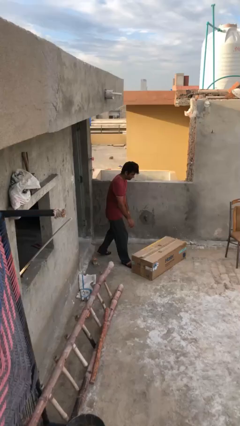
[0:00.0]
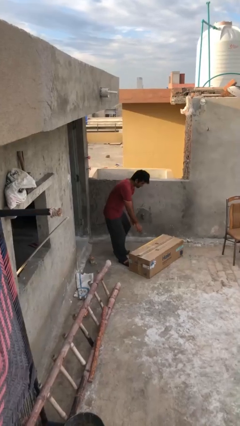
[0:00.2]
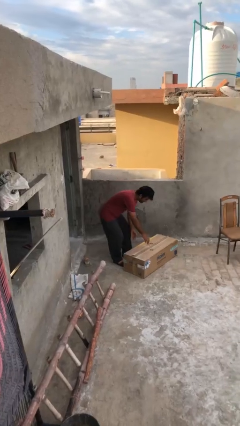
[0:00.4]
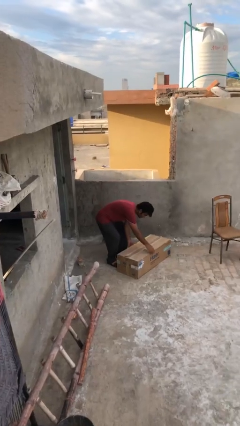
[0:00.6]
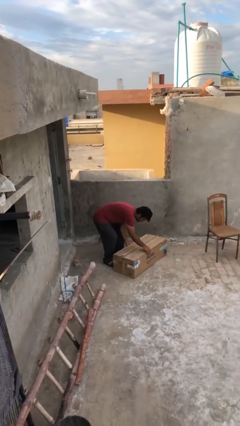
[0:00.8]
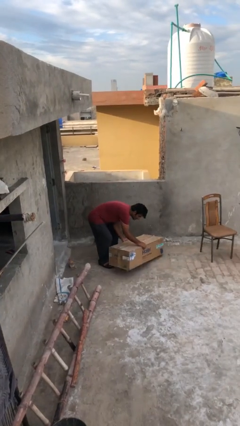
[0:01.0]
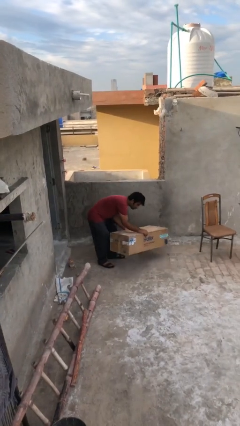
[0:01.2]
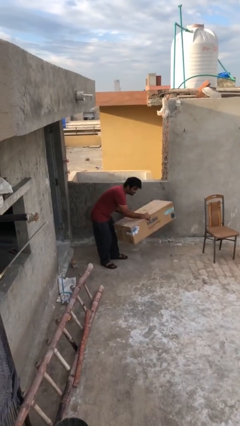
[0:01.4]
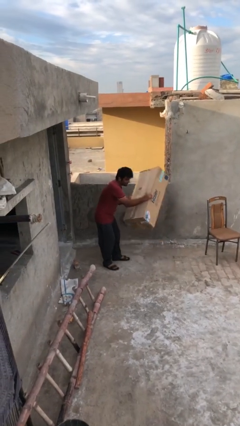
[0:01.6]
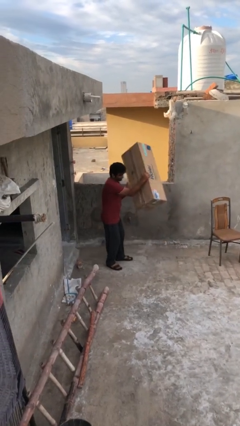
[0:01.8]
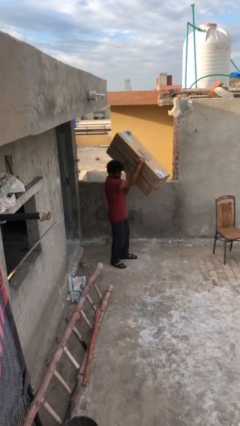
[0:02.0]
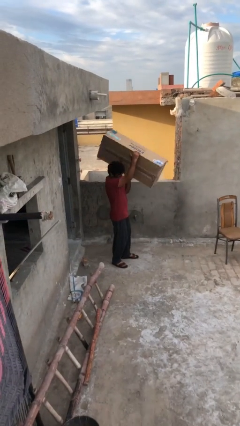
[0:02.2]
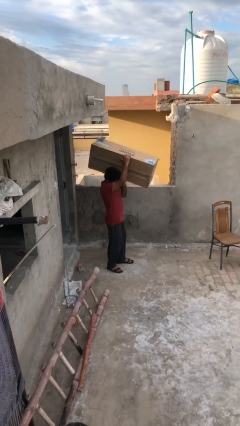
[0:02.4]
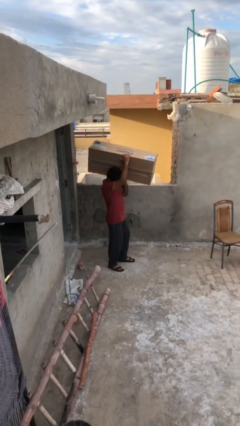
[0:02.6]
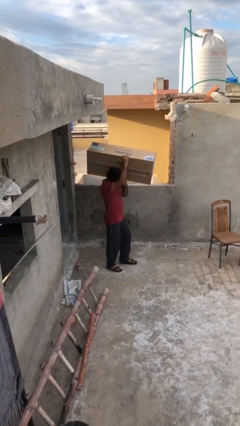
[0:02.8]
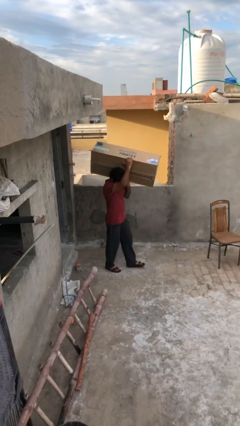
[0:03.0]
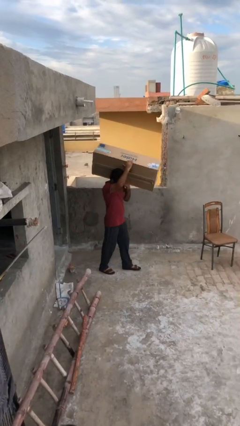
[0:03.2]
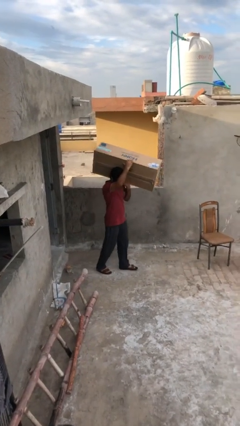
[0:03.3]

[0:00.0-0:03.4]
person picks up object from floor

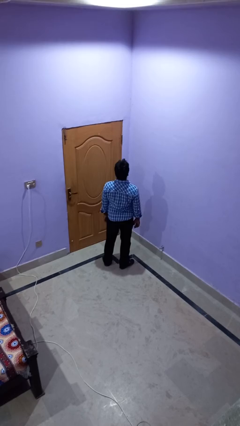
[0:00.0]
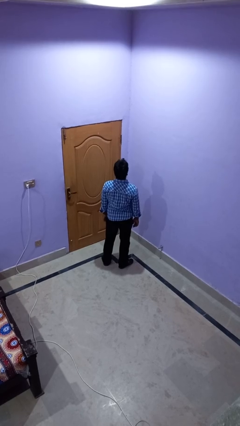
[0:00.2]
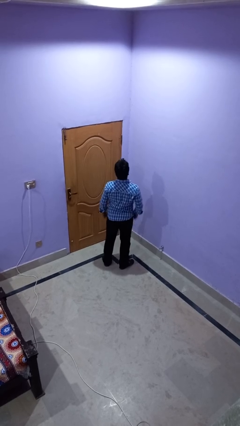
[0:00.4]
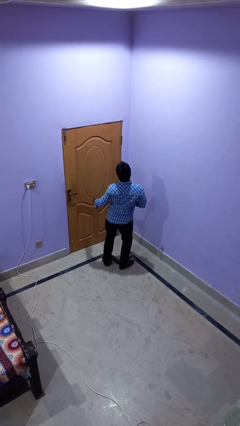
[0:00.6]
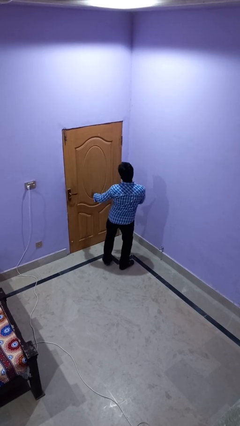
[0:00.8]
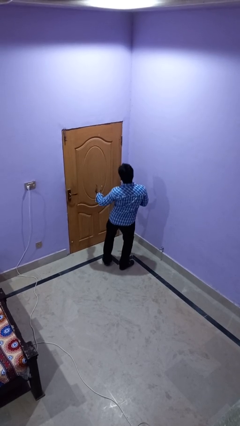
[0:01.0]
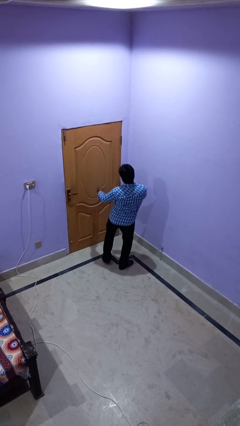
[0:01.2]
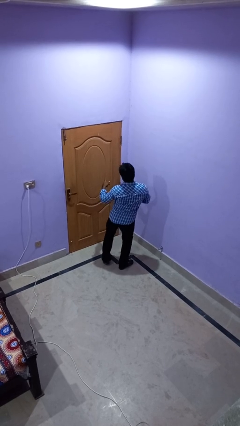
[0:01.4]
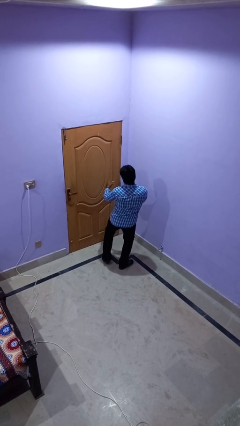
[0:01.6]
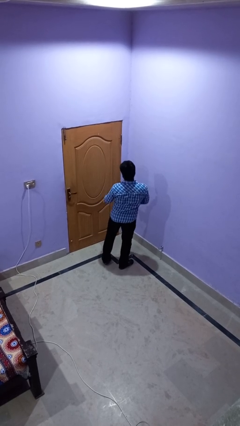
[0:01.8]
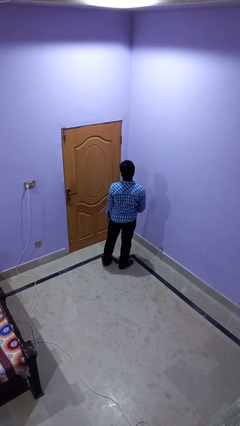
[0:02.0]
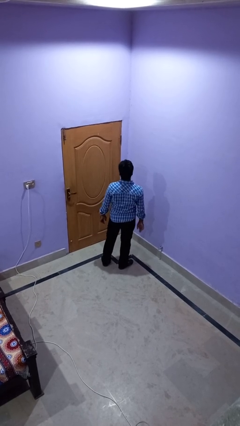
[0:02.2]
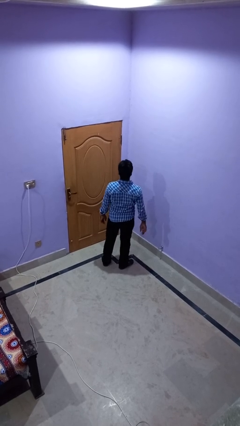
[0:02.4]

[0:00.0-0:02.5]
person dances in place

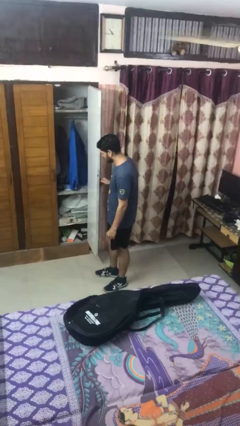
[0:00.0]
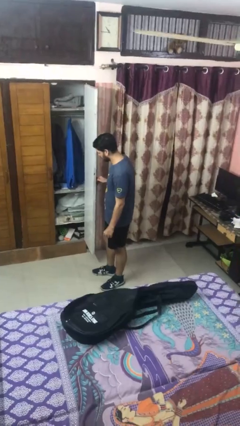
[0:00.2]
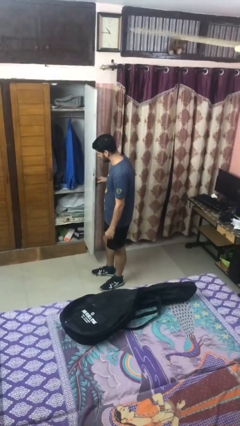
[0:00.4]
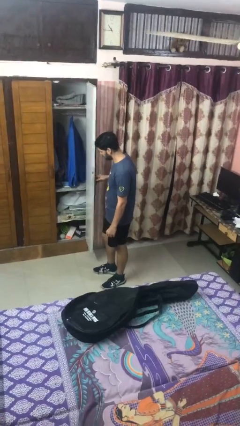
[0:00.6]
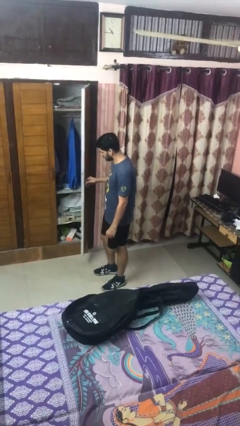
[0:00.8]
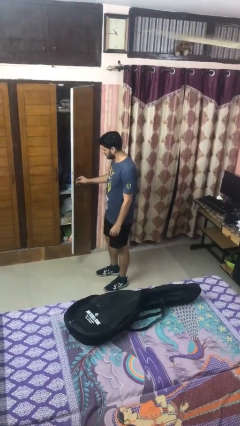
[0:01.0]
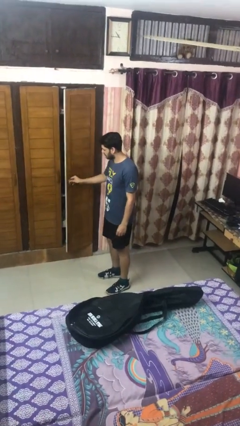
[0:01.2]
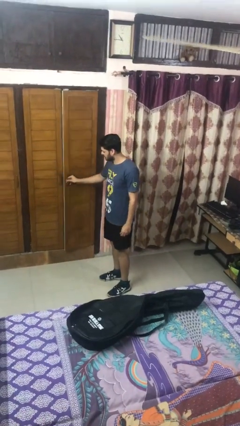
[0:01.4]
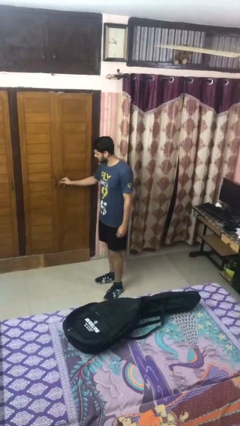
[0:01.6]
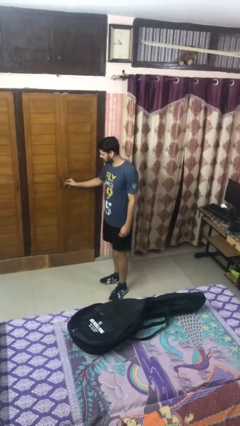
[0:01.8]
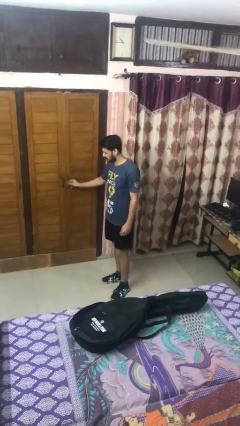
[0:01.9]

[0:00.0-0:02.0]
person closes closet door

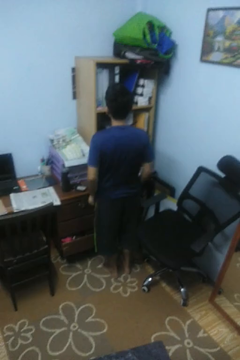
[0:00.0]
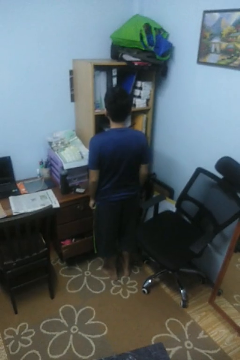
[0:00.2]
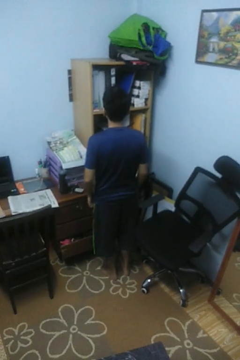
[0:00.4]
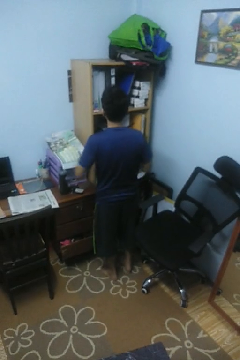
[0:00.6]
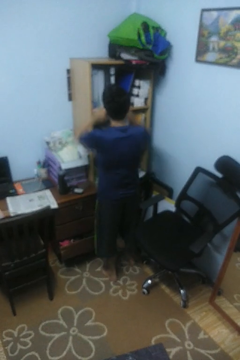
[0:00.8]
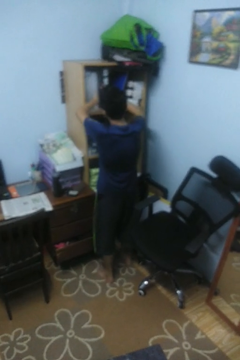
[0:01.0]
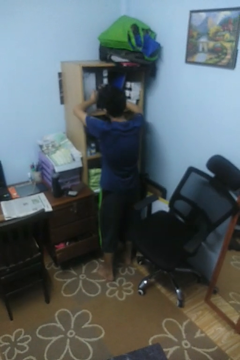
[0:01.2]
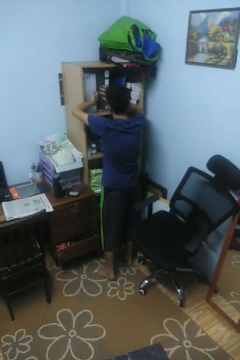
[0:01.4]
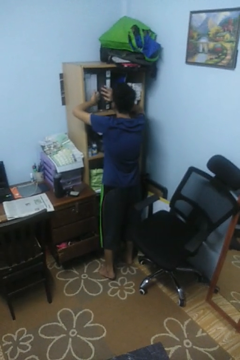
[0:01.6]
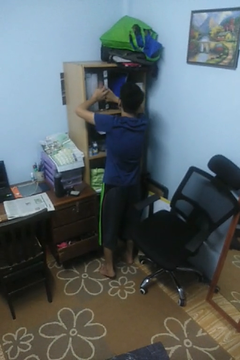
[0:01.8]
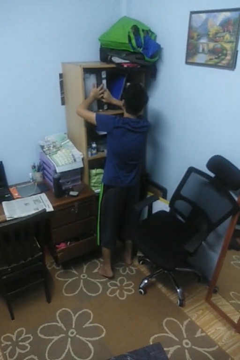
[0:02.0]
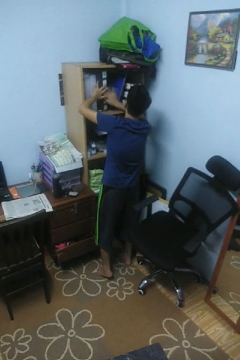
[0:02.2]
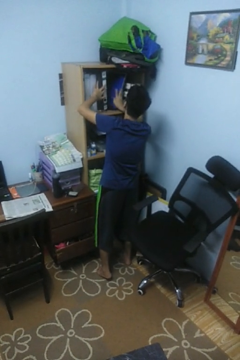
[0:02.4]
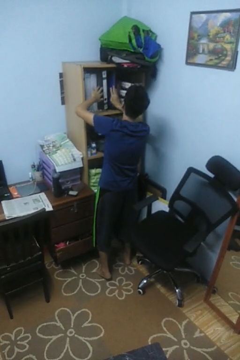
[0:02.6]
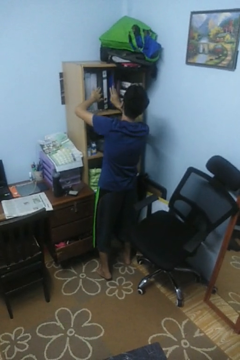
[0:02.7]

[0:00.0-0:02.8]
person searches in cabinet

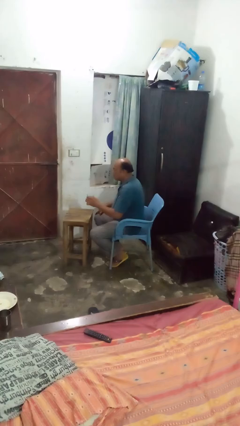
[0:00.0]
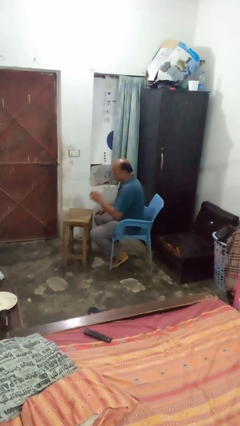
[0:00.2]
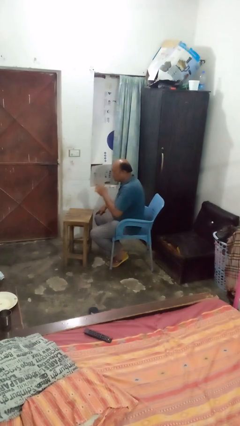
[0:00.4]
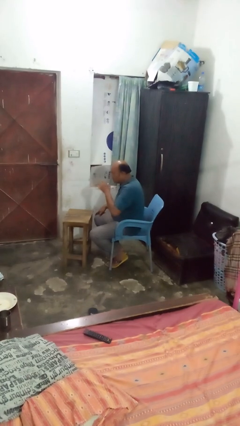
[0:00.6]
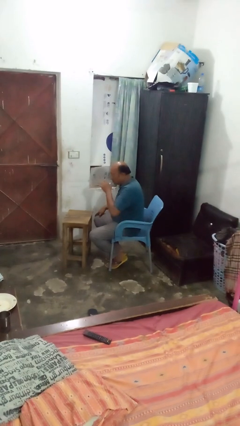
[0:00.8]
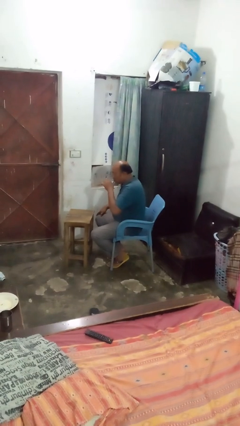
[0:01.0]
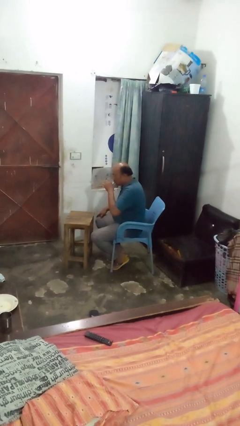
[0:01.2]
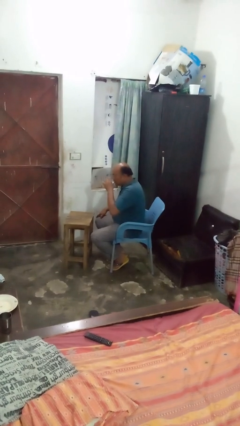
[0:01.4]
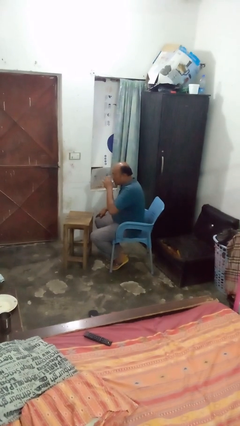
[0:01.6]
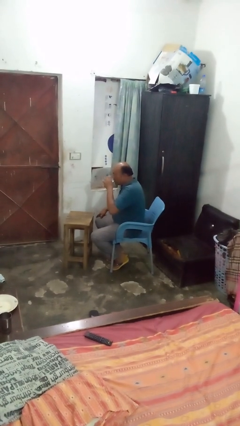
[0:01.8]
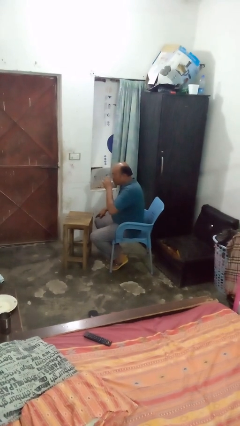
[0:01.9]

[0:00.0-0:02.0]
person drinks from shotglass

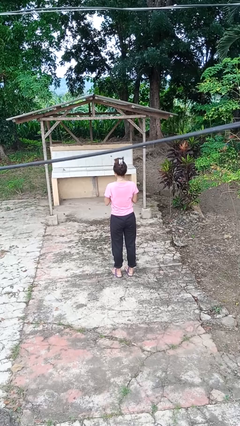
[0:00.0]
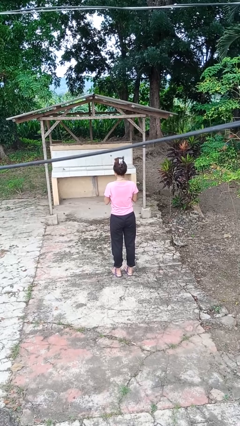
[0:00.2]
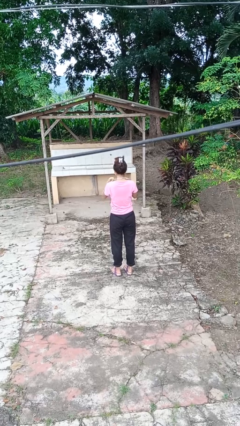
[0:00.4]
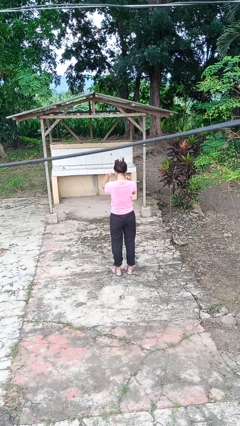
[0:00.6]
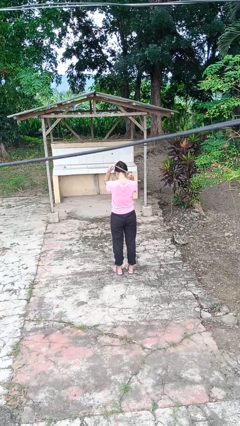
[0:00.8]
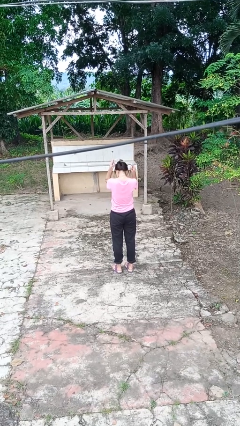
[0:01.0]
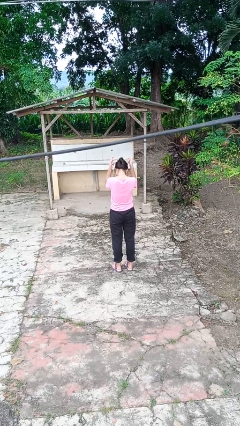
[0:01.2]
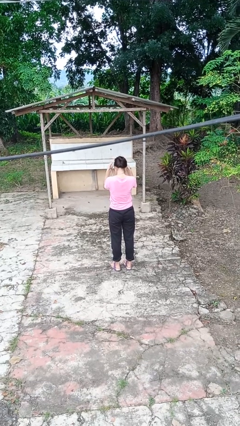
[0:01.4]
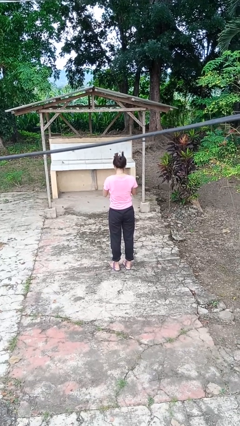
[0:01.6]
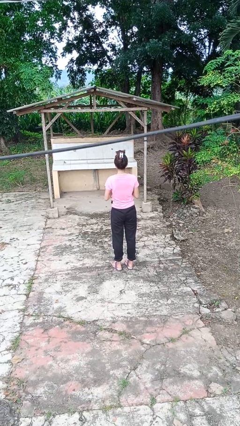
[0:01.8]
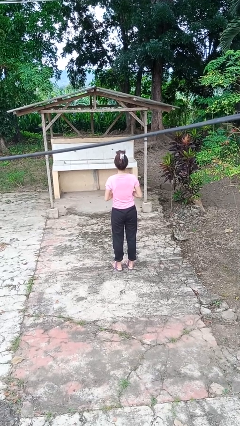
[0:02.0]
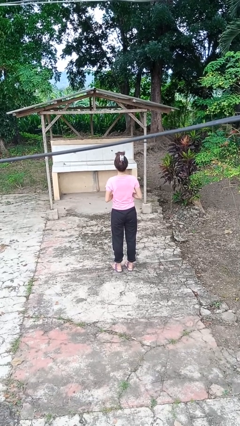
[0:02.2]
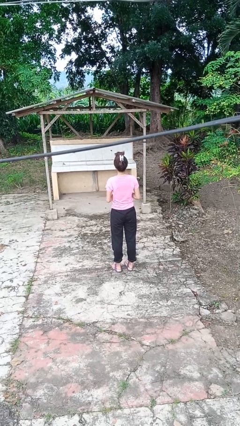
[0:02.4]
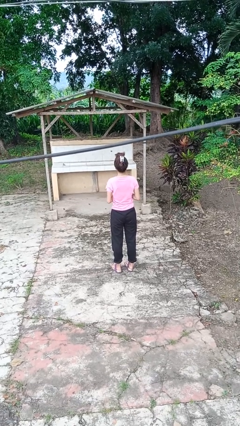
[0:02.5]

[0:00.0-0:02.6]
person takes off necklace

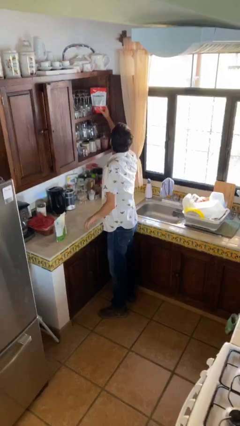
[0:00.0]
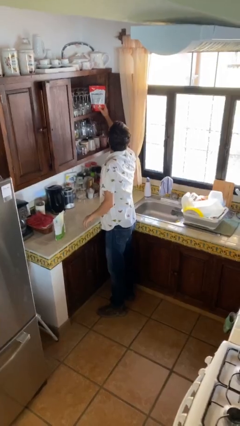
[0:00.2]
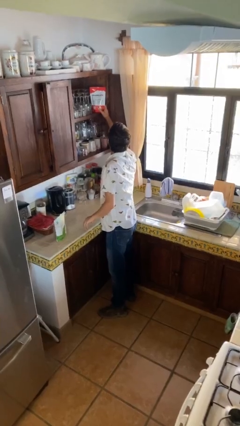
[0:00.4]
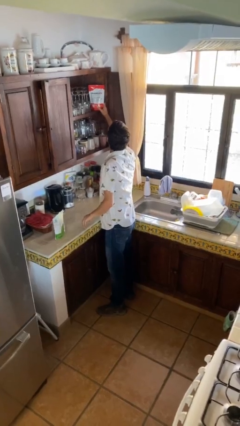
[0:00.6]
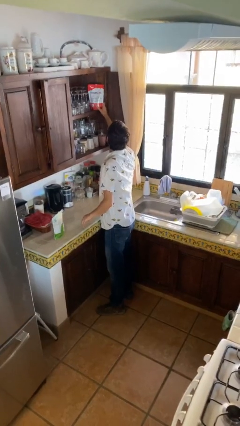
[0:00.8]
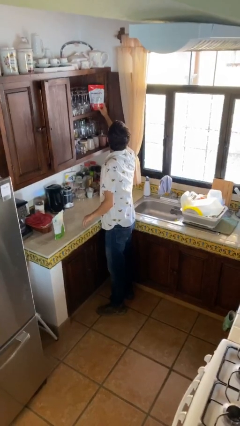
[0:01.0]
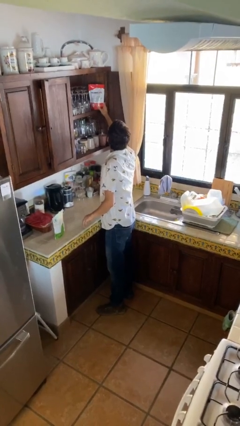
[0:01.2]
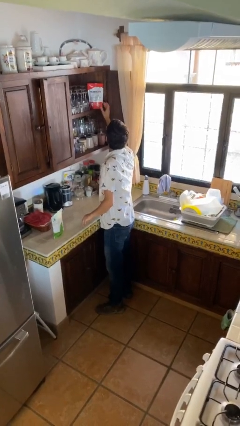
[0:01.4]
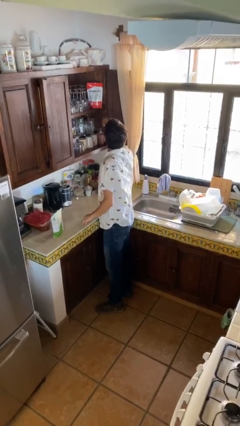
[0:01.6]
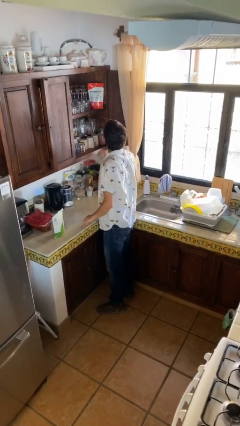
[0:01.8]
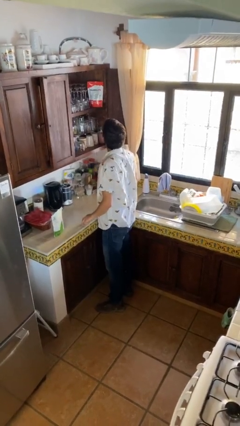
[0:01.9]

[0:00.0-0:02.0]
person puts down object on shelf

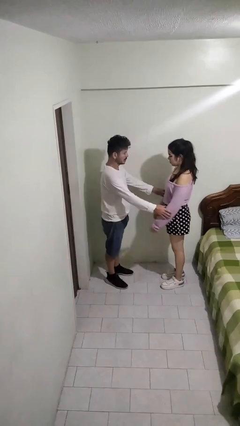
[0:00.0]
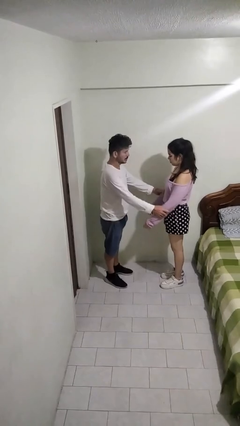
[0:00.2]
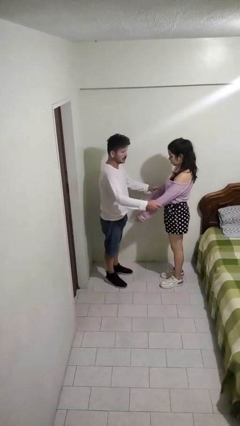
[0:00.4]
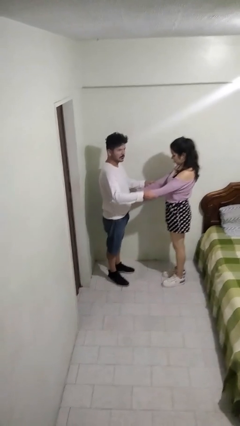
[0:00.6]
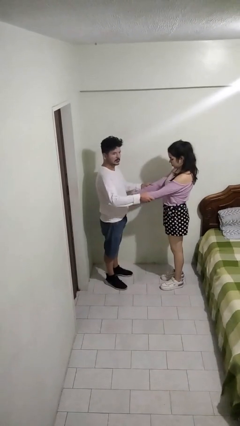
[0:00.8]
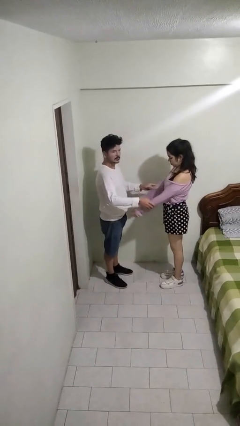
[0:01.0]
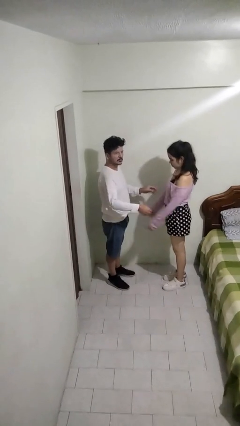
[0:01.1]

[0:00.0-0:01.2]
person grabs person by forearm
